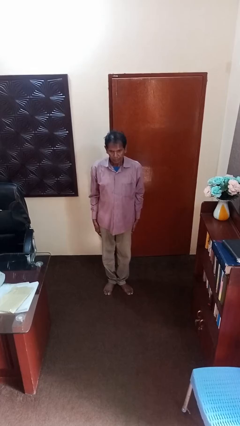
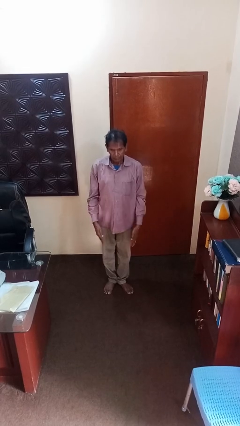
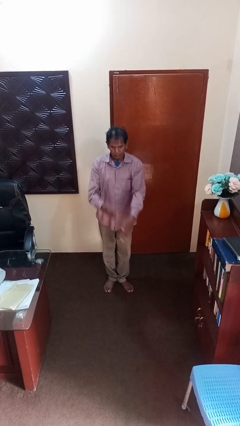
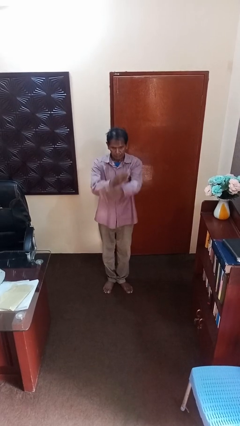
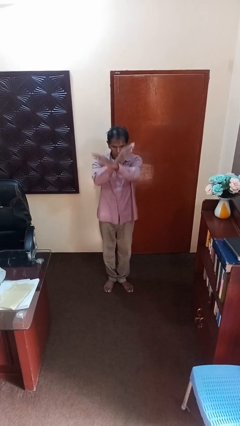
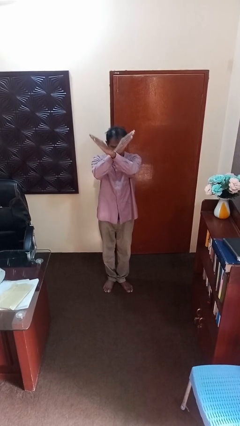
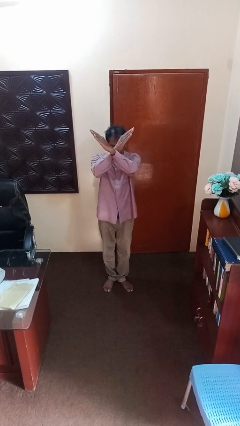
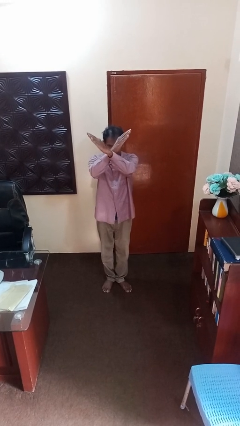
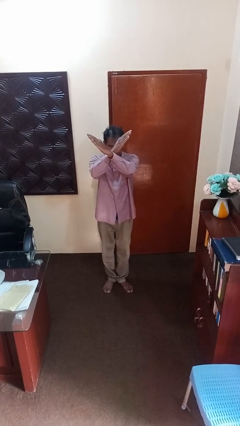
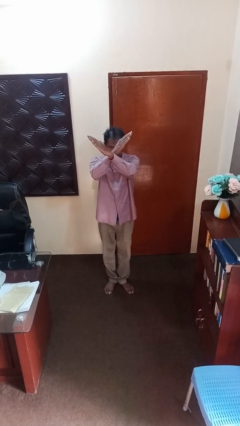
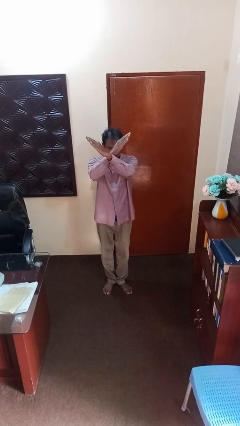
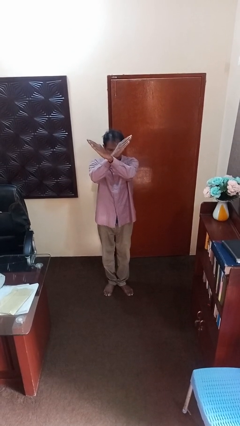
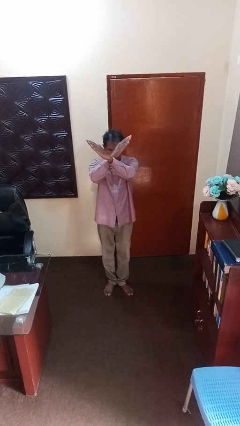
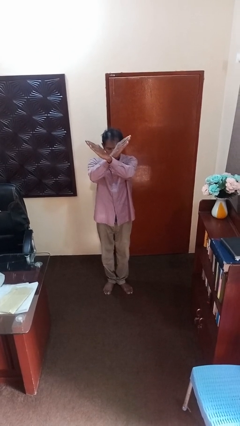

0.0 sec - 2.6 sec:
person gestures arms x

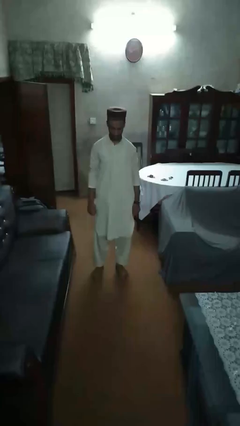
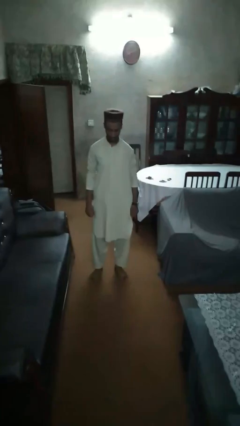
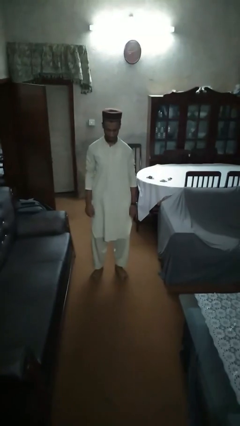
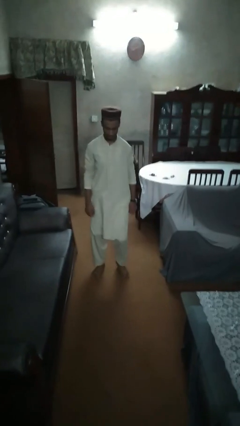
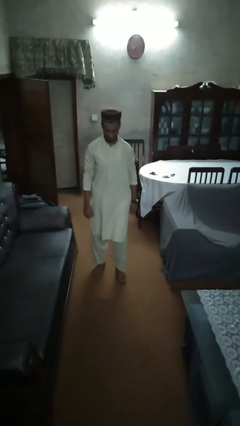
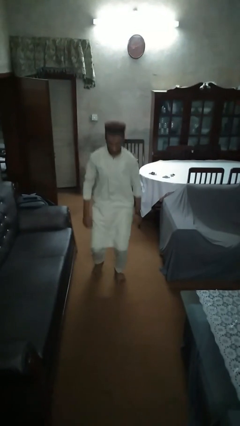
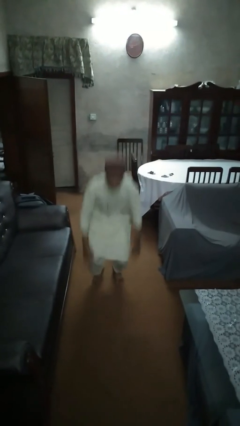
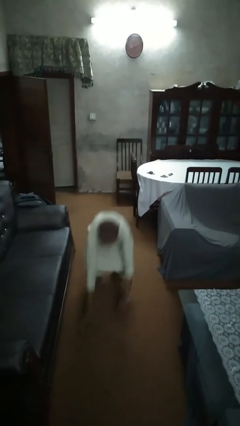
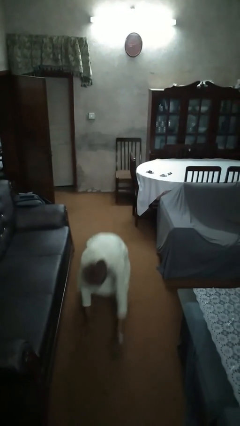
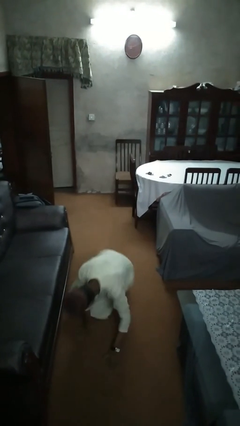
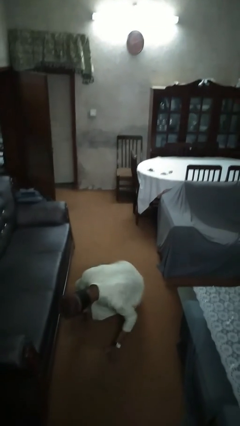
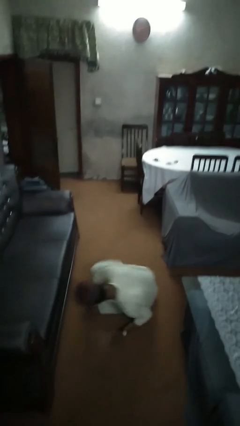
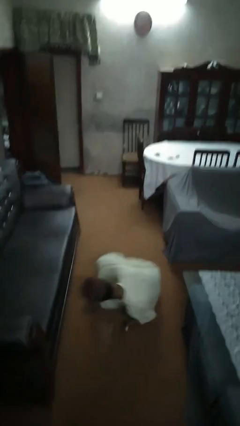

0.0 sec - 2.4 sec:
person trips on object on floor

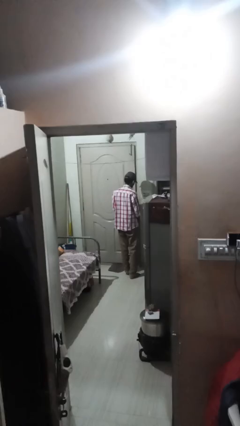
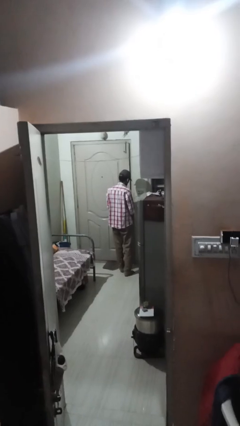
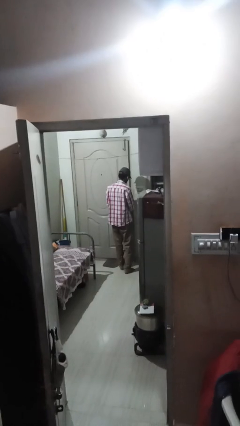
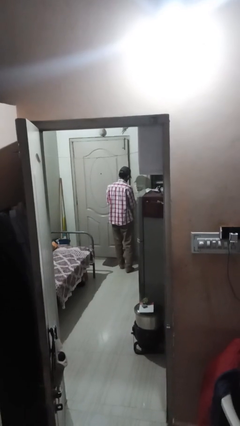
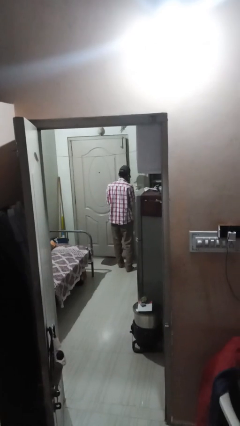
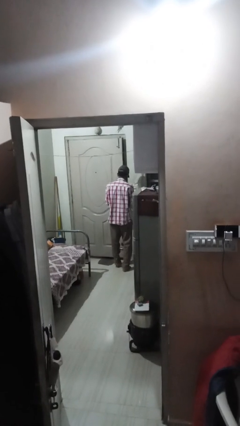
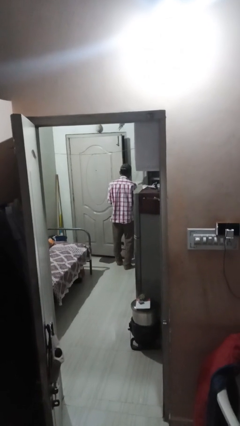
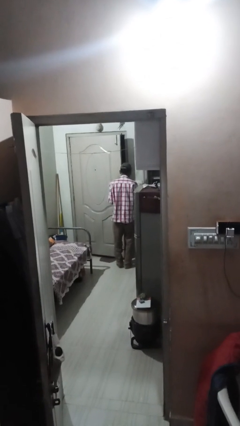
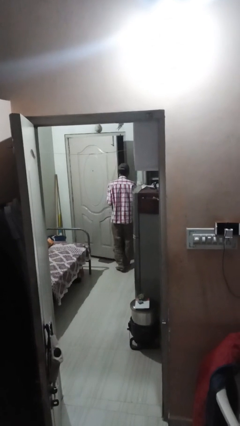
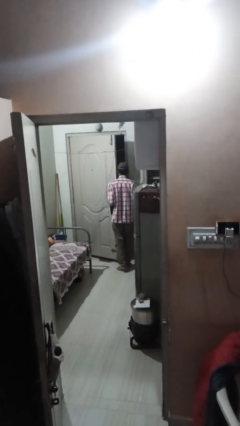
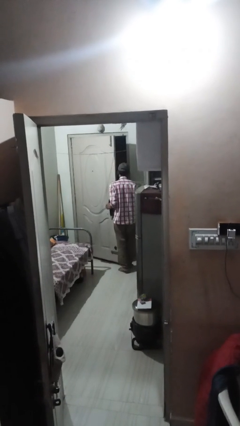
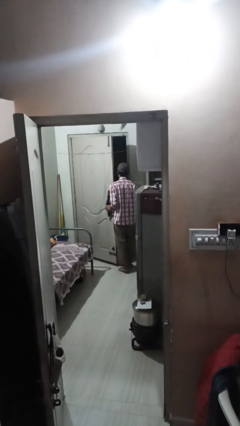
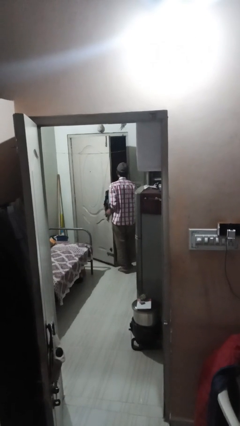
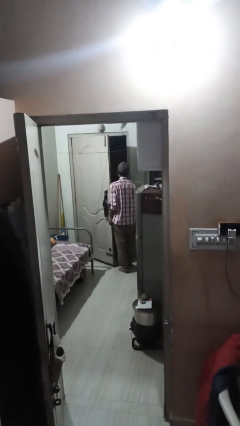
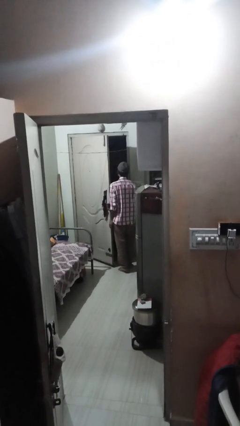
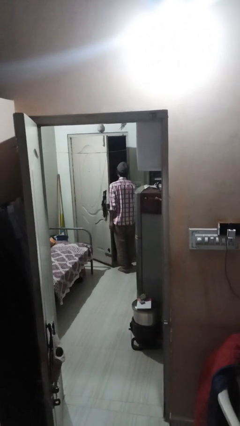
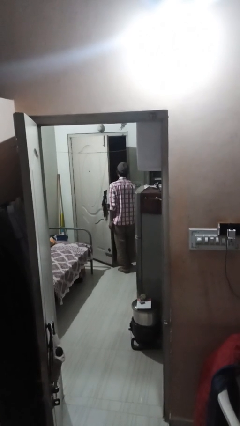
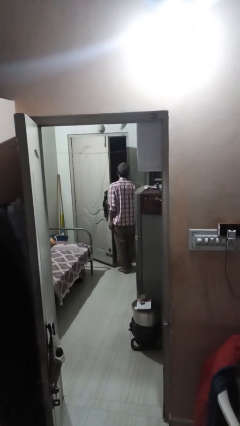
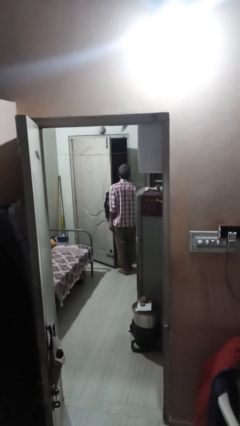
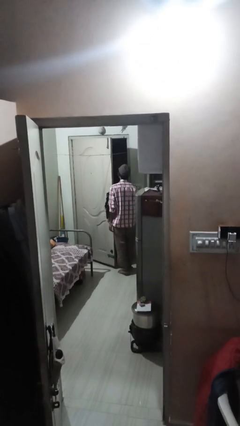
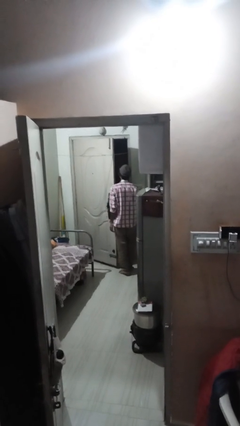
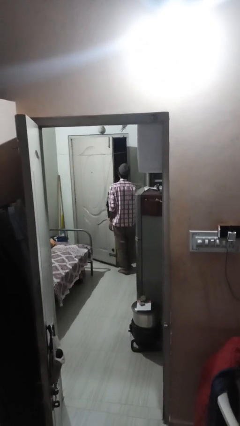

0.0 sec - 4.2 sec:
person opens facility door

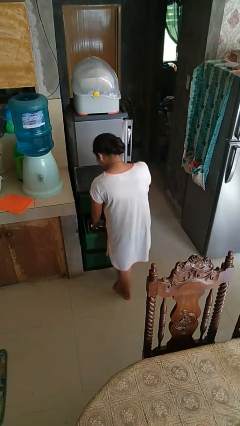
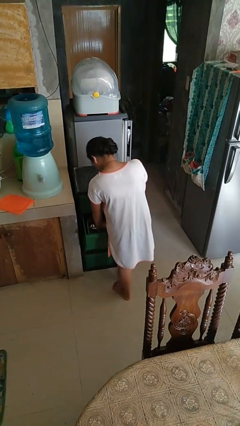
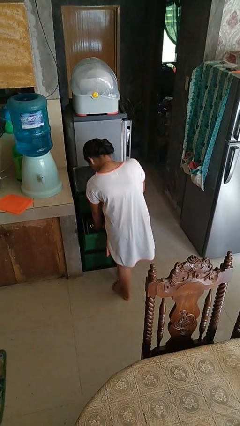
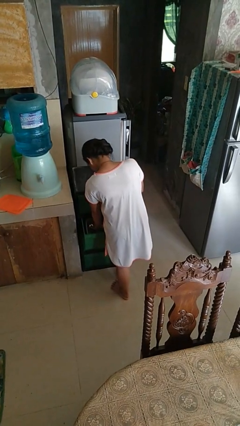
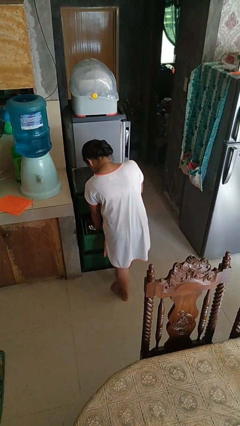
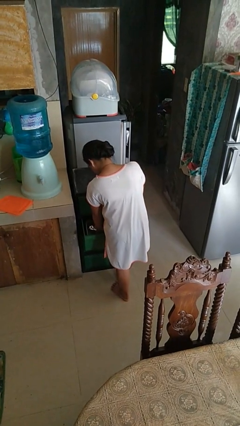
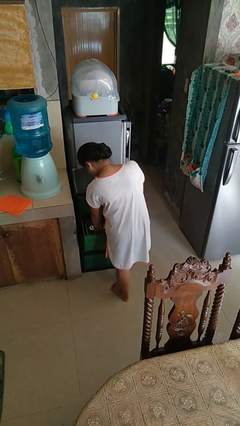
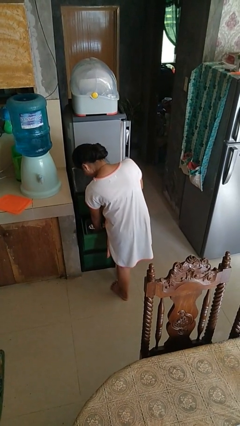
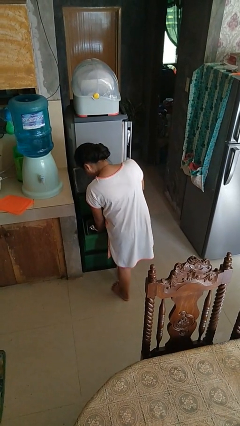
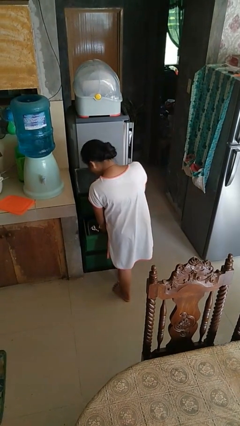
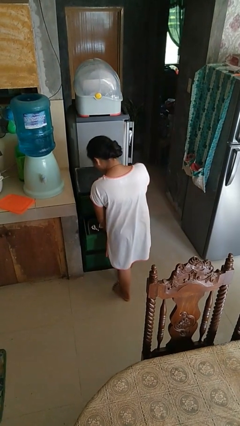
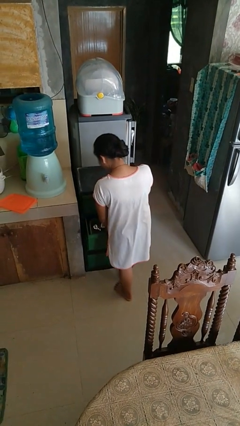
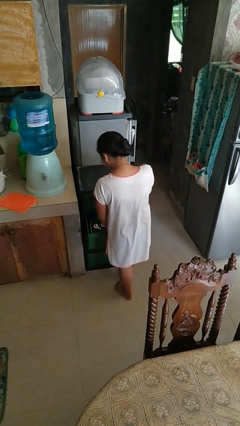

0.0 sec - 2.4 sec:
person searches in kitchen drawer

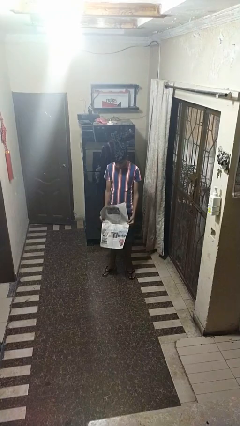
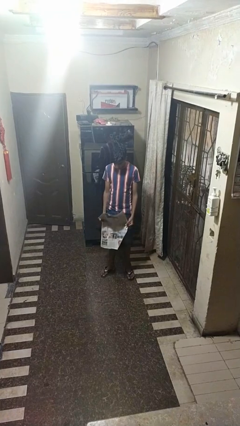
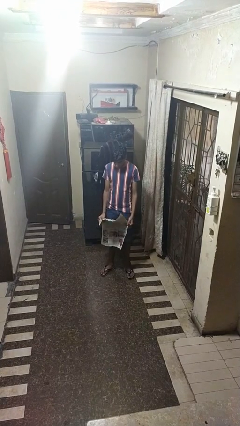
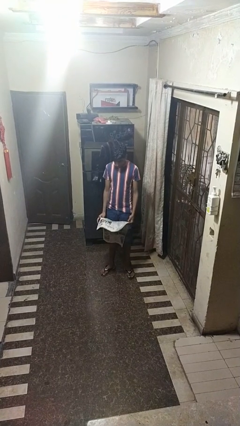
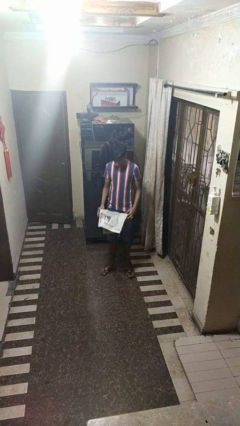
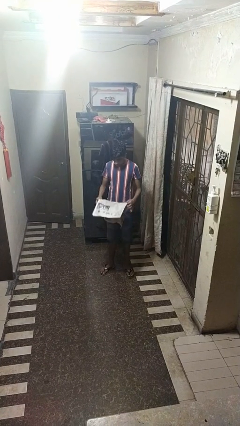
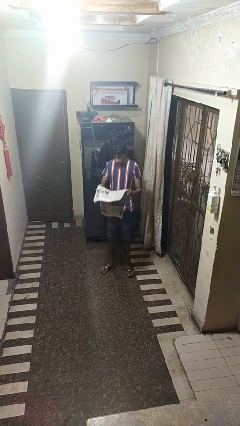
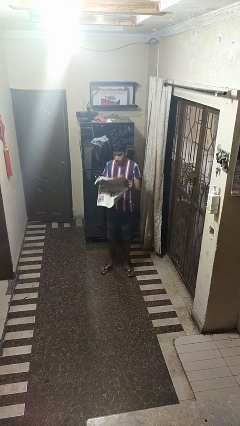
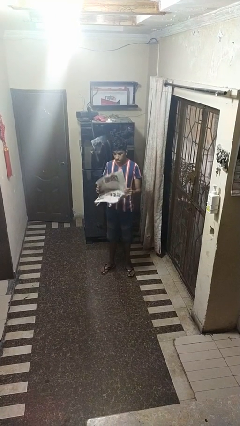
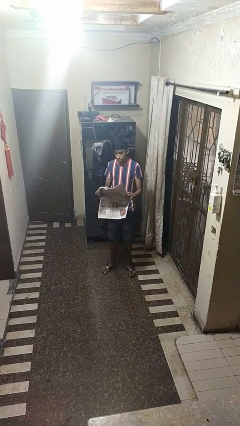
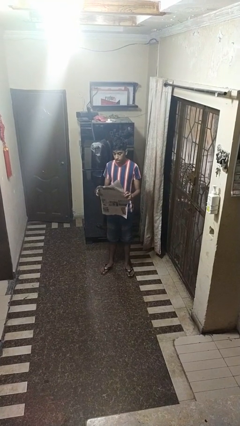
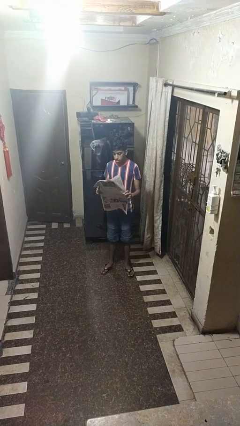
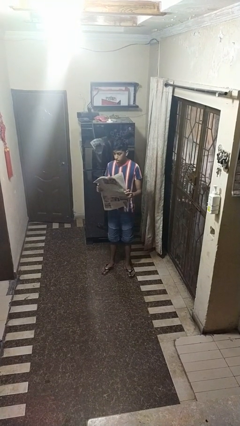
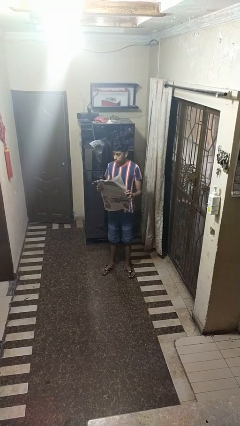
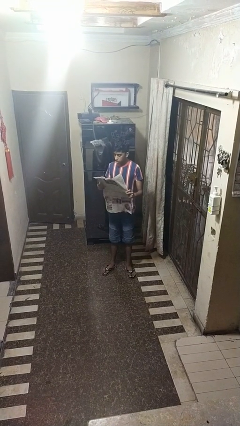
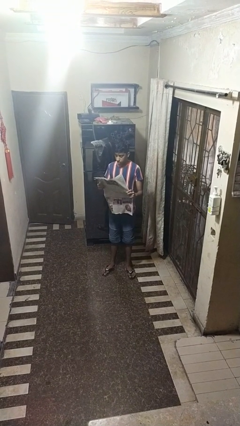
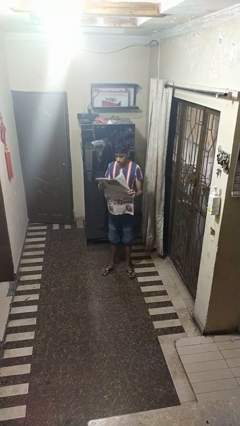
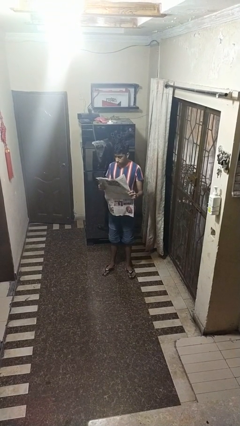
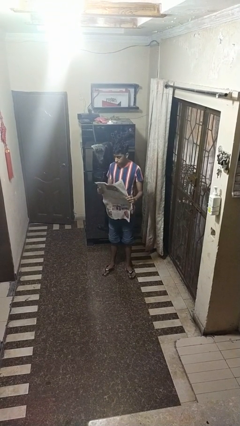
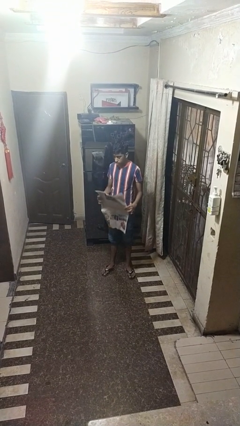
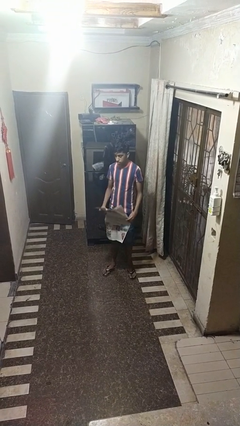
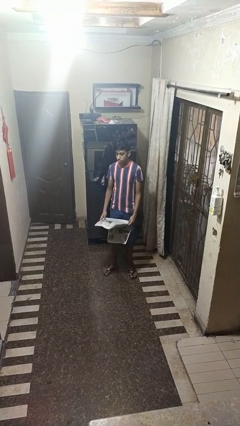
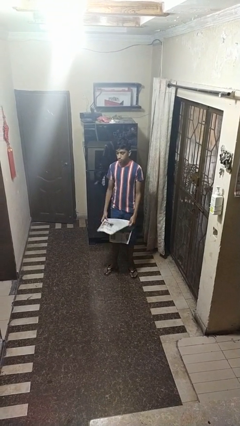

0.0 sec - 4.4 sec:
person reads newspaper

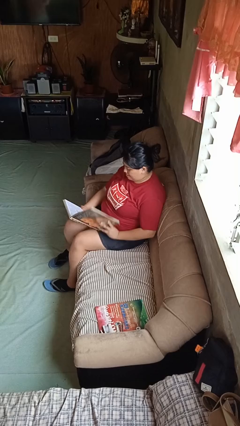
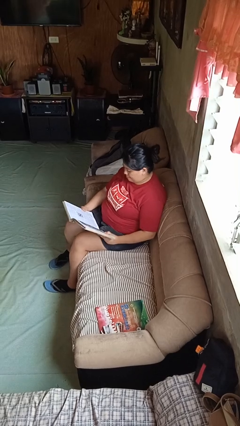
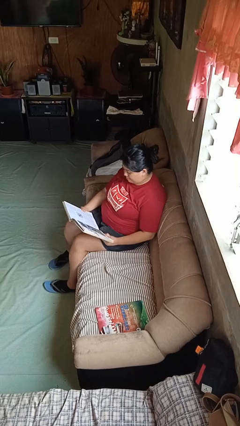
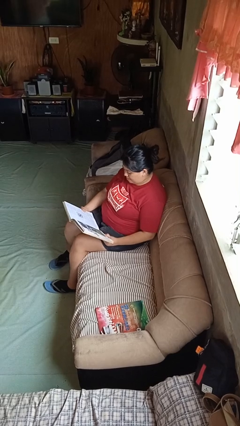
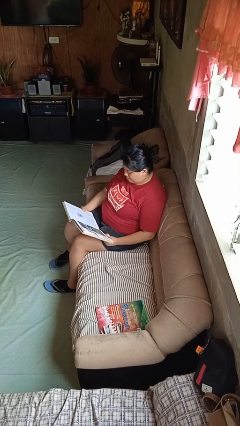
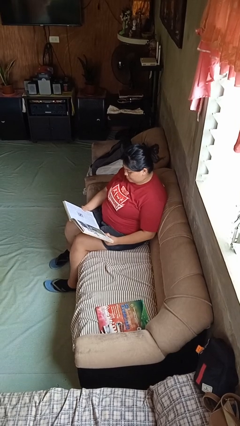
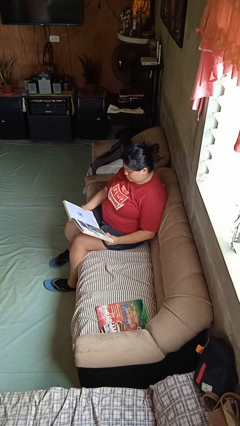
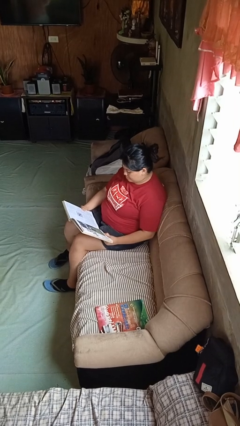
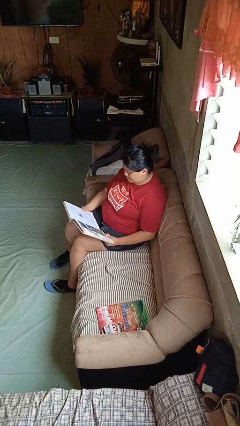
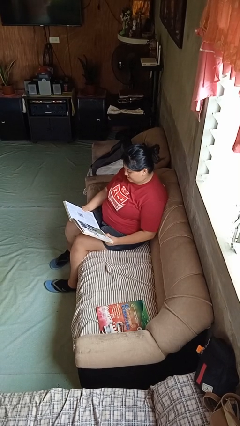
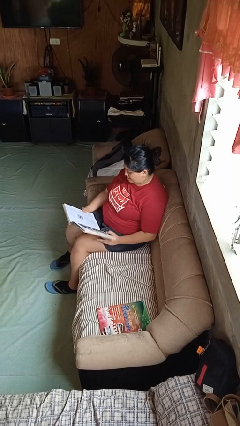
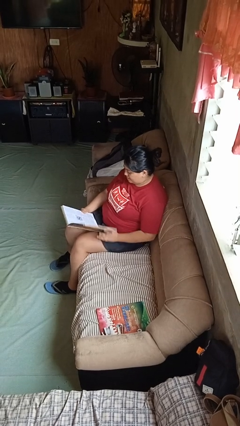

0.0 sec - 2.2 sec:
person reads book
